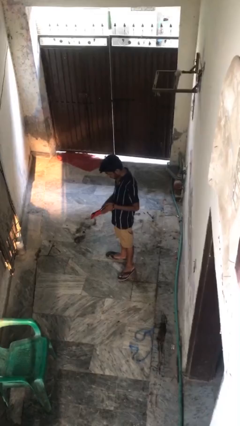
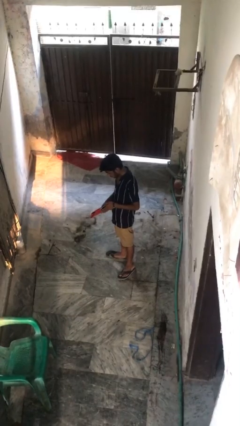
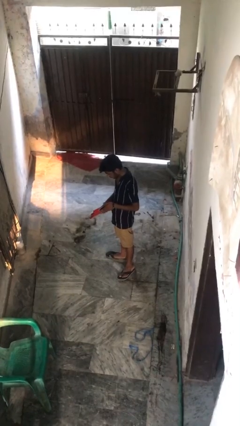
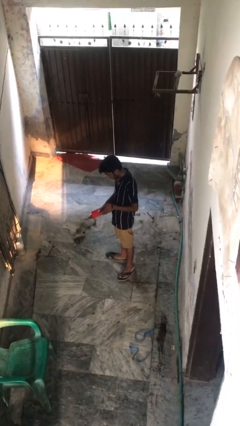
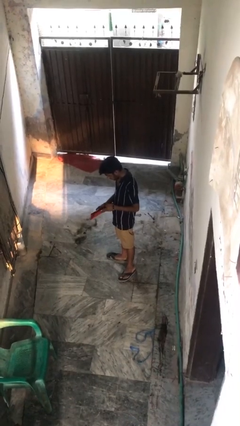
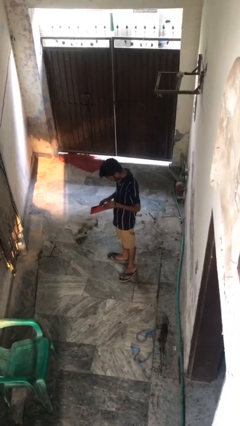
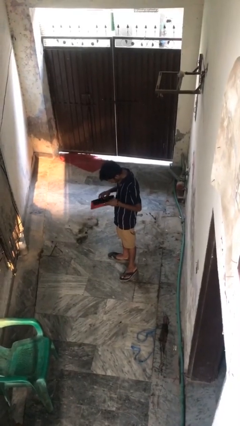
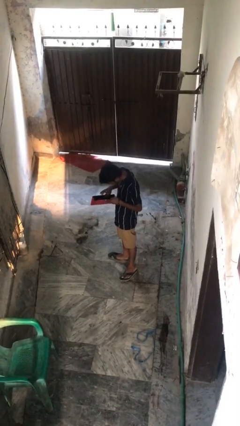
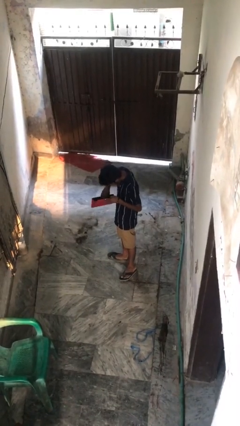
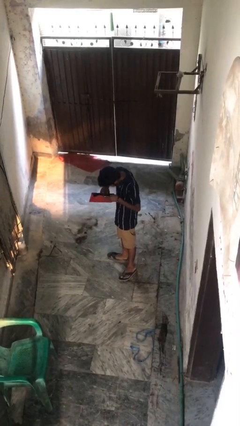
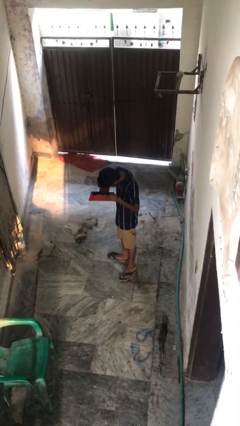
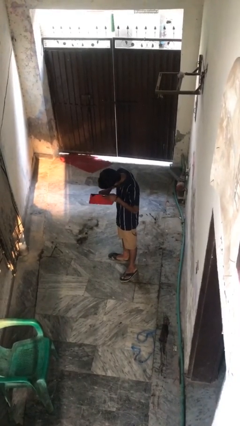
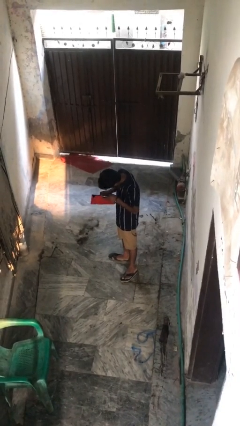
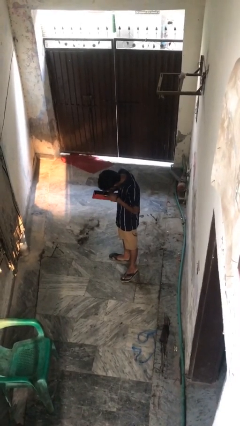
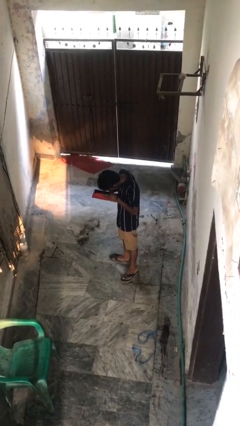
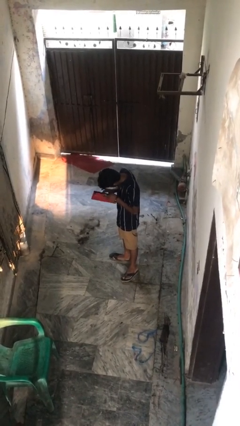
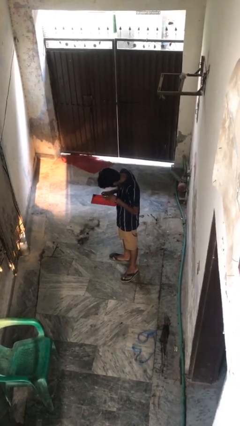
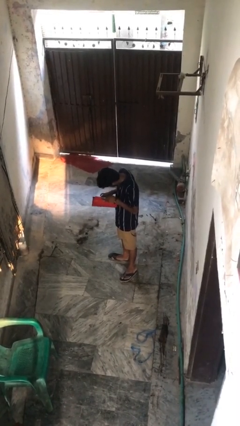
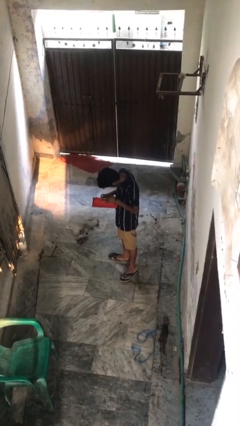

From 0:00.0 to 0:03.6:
person searches in purse

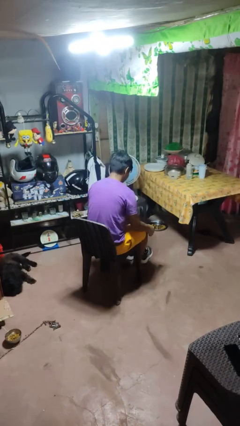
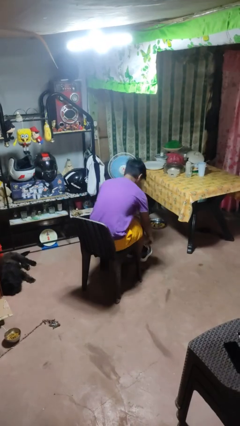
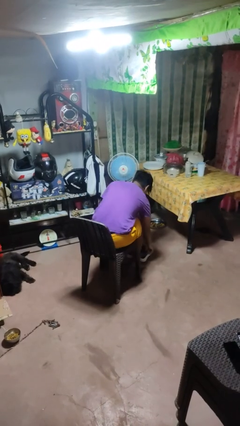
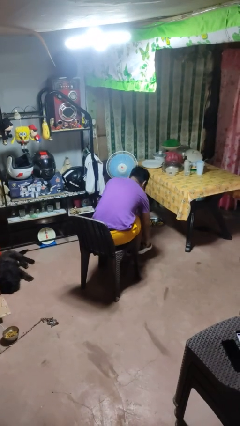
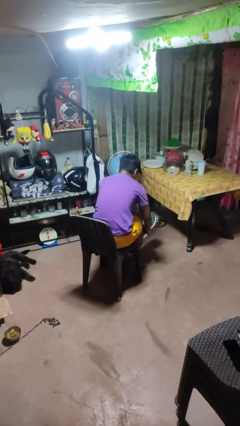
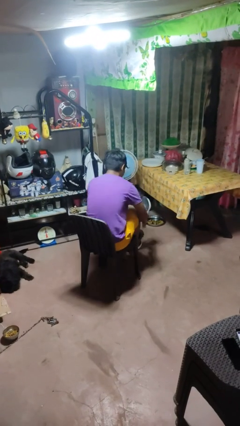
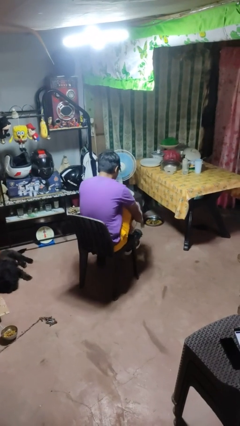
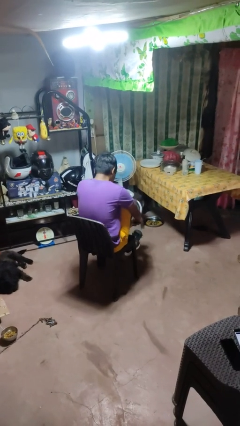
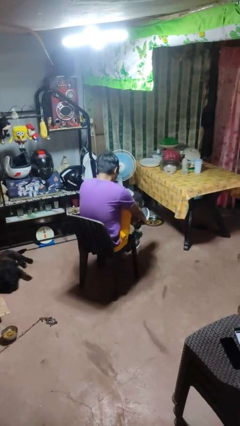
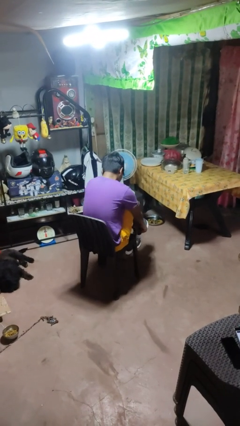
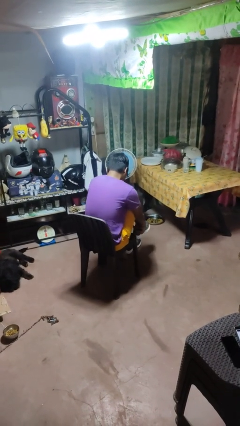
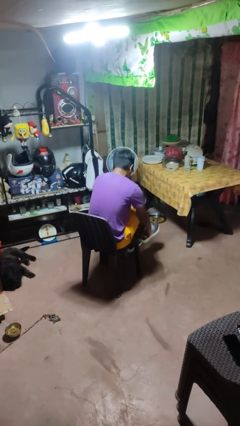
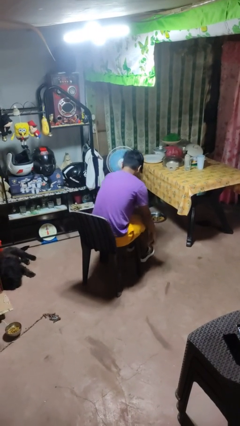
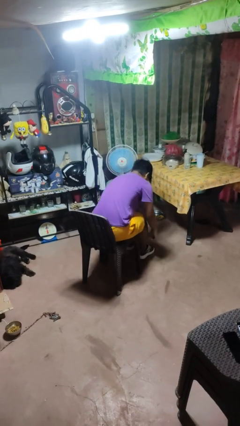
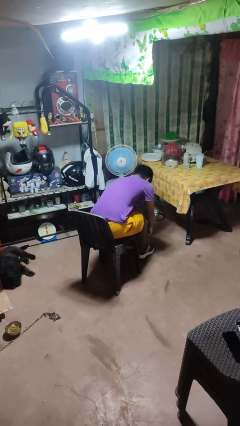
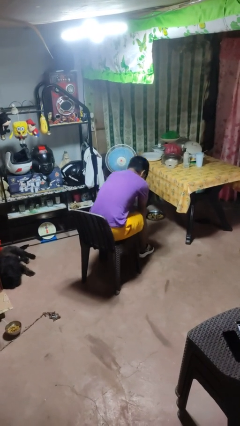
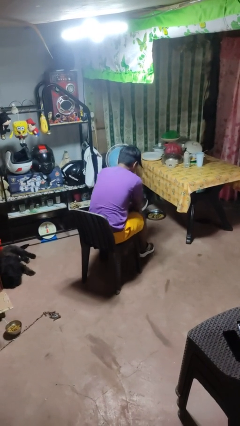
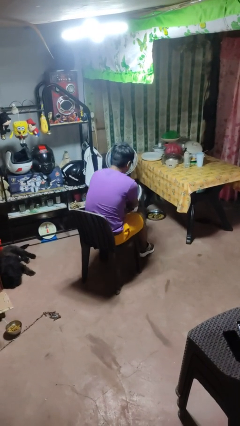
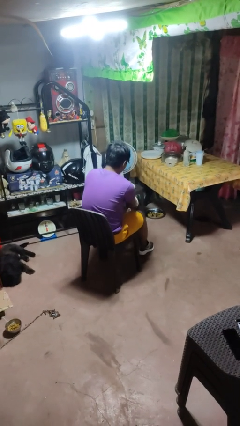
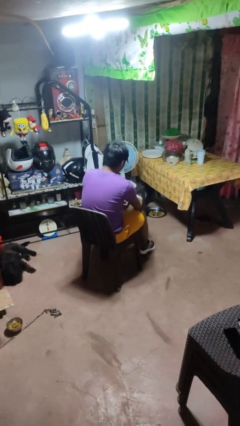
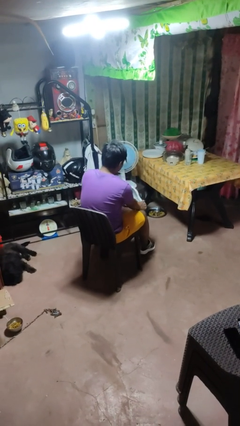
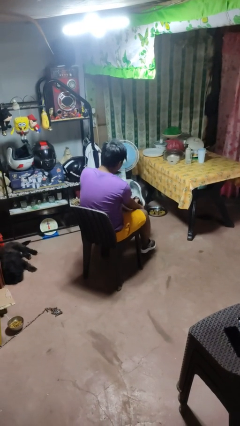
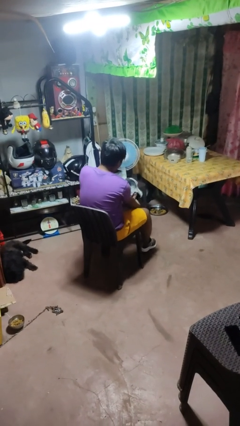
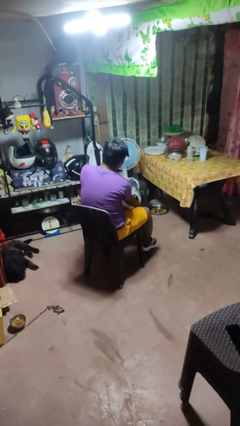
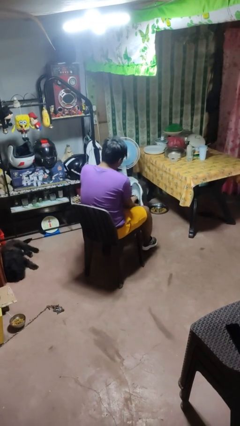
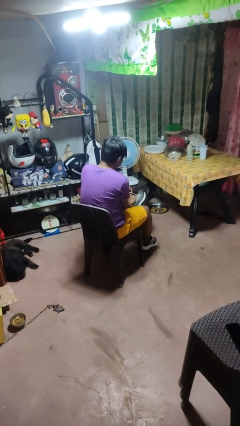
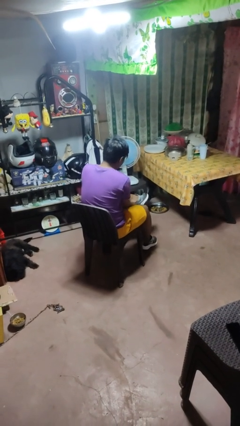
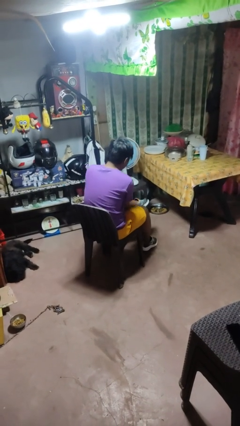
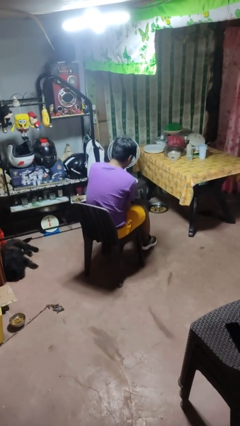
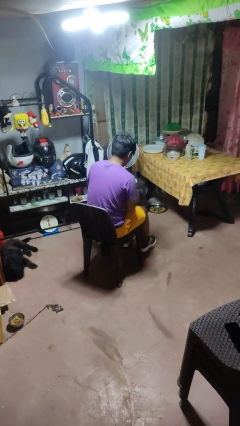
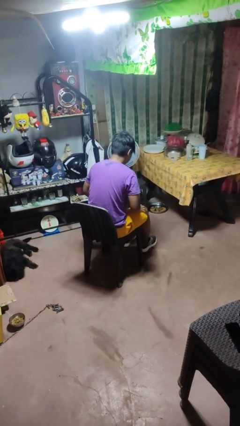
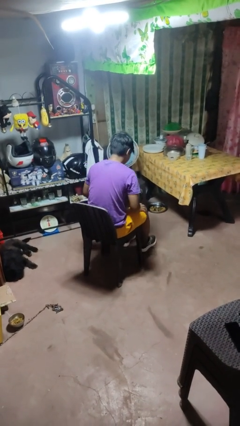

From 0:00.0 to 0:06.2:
person puts on shoes

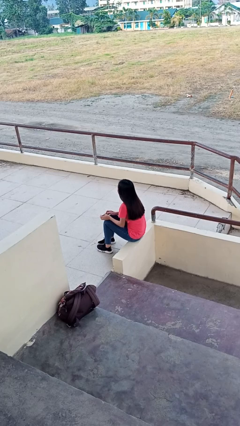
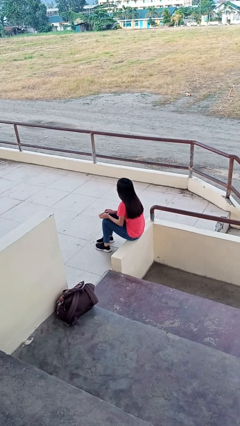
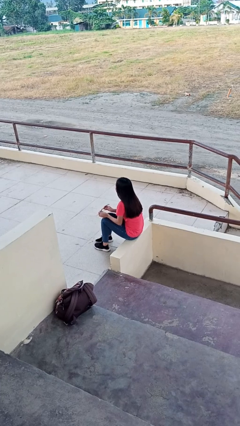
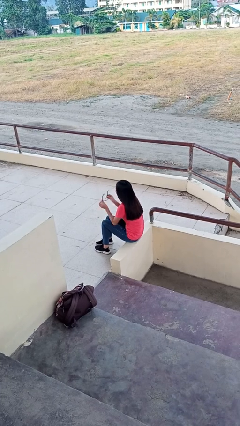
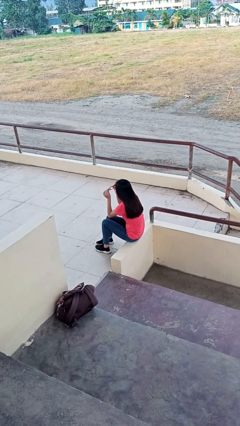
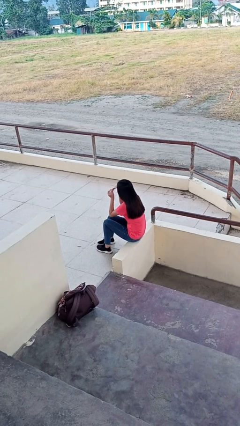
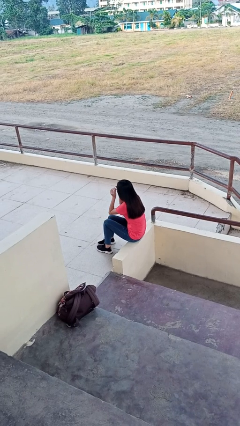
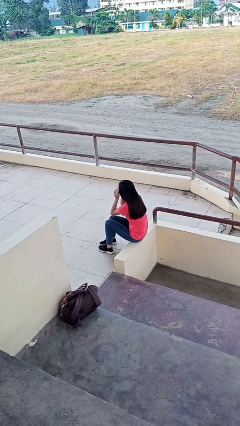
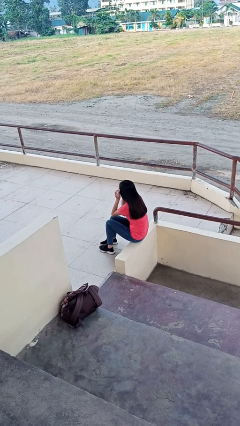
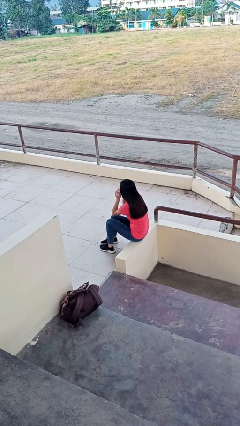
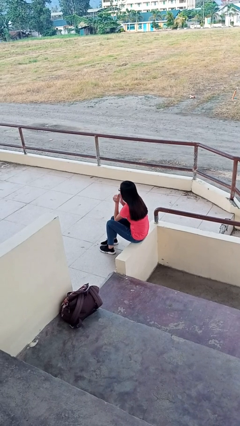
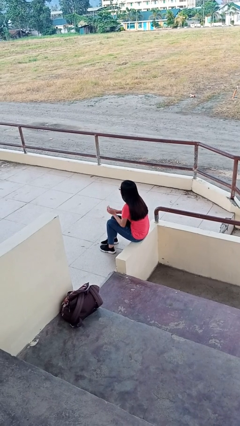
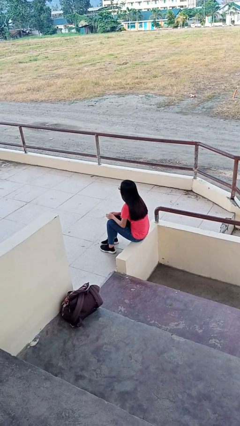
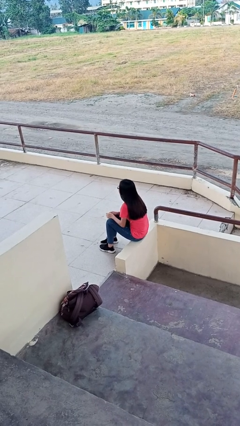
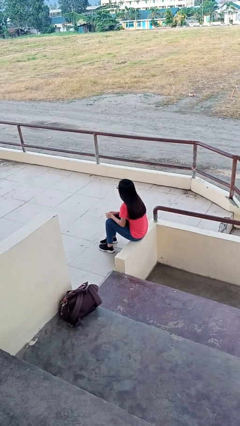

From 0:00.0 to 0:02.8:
person puts on glasses

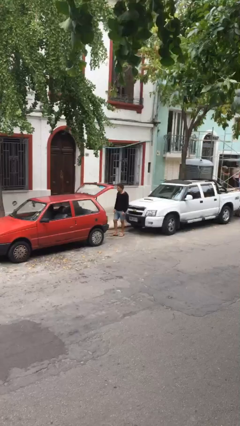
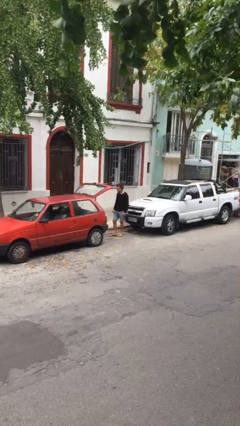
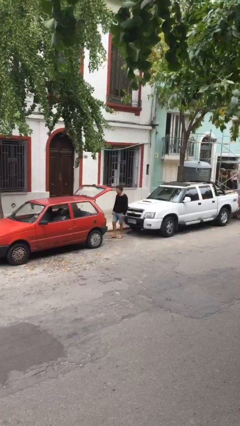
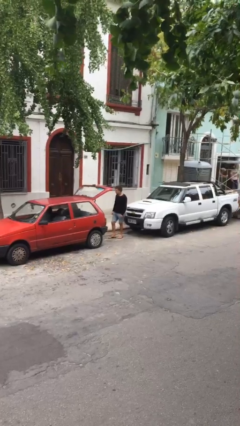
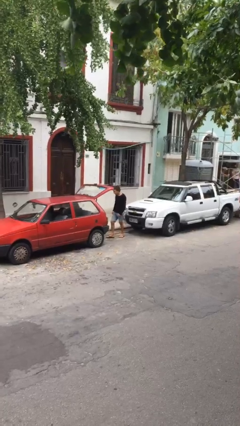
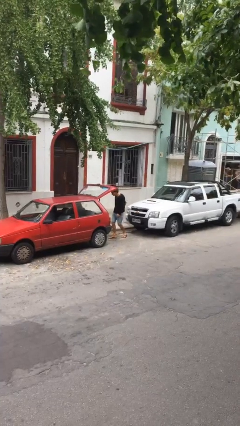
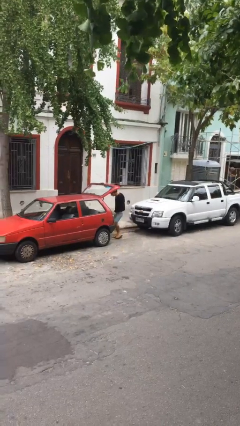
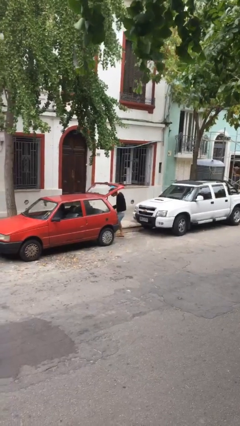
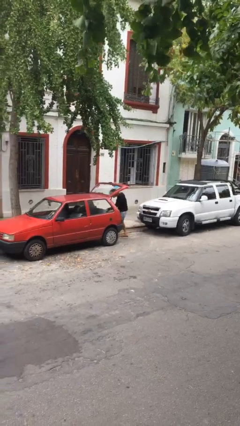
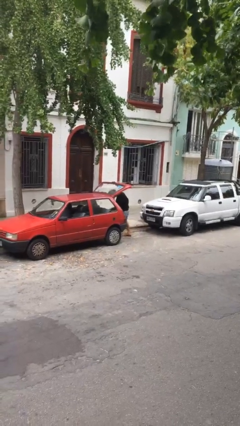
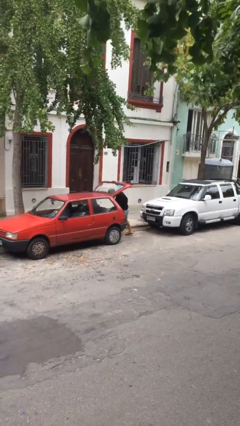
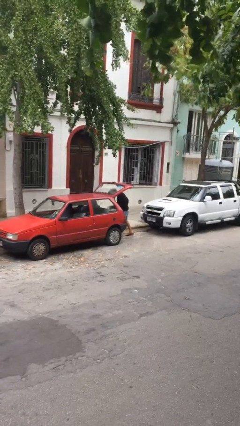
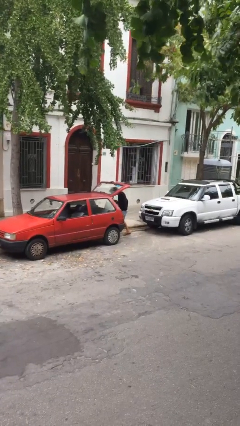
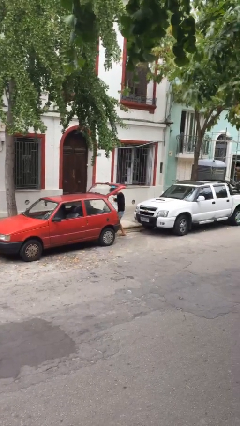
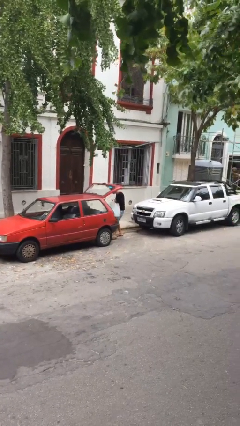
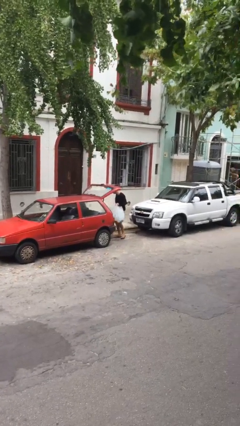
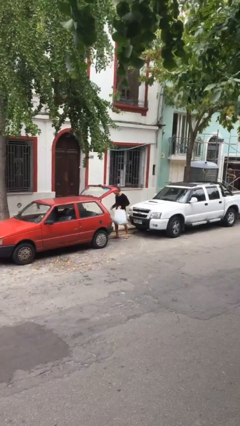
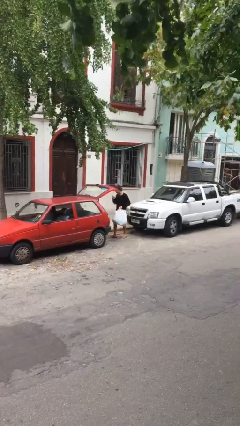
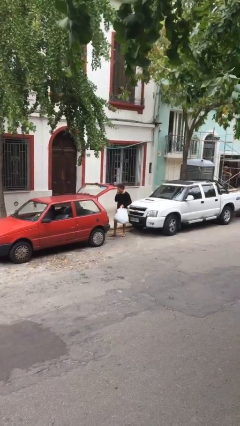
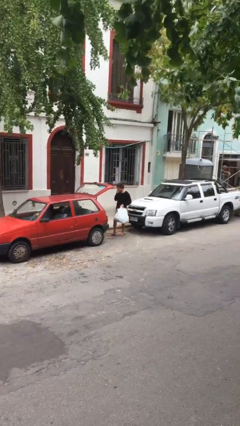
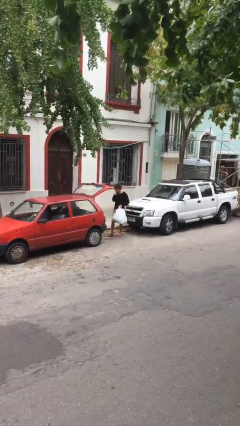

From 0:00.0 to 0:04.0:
person unloads car

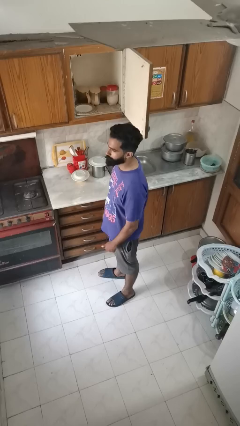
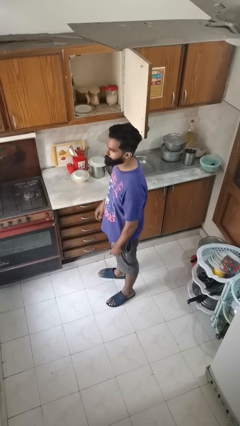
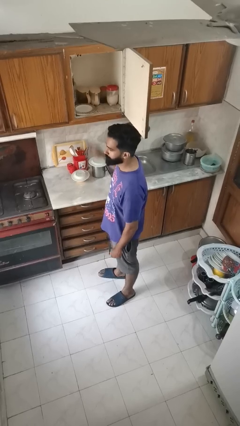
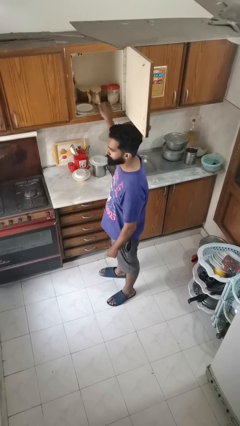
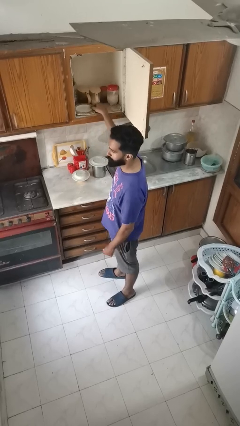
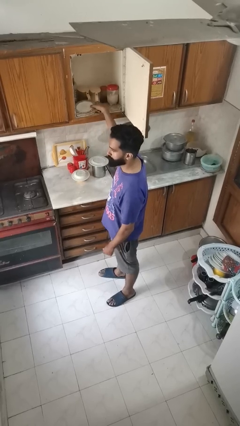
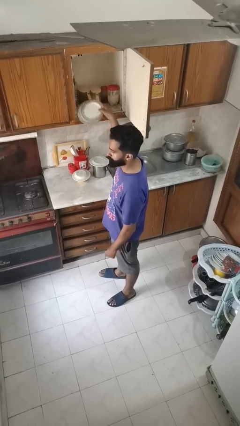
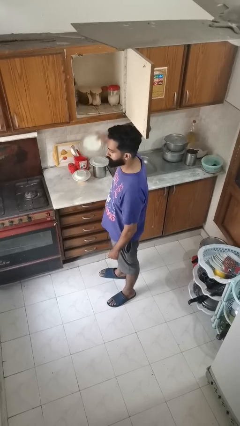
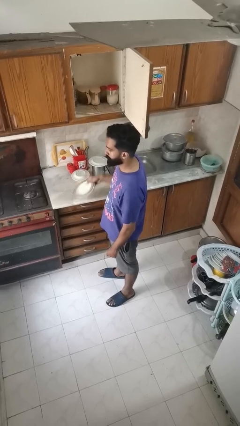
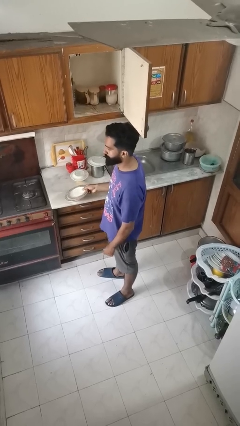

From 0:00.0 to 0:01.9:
person takes object from cabinet
